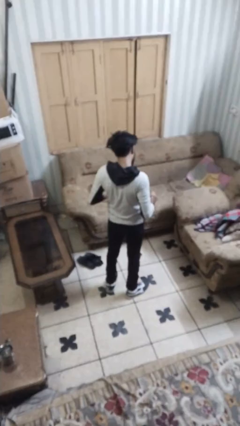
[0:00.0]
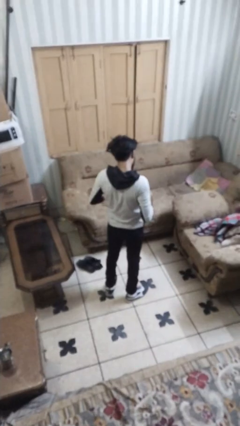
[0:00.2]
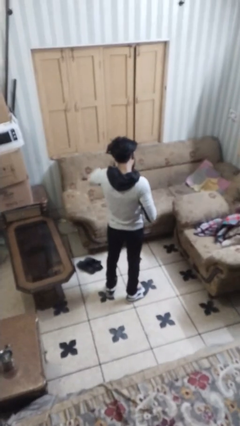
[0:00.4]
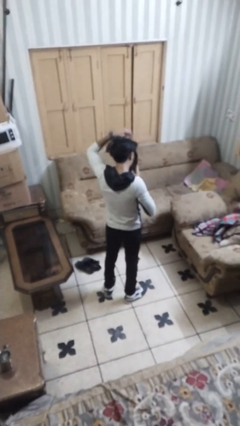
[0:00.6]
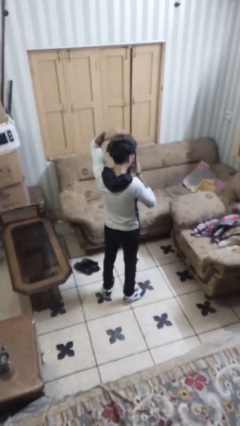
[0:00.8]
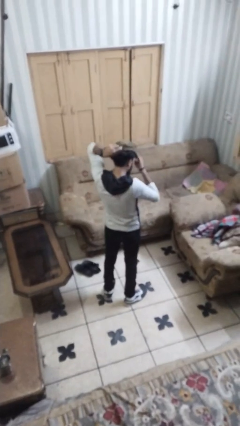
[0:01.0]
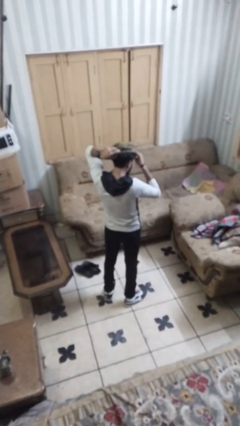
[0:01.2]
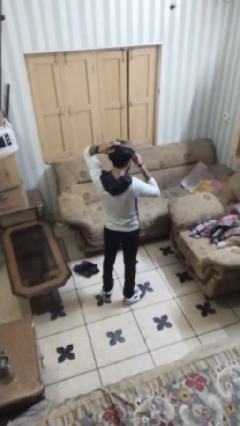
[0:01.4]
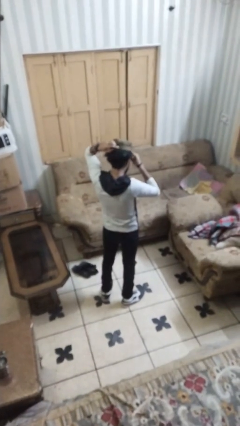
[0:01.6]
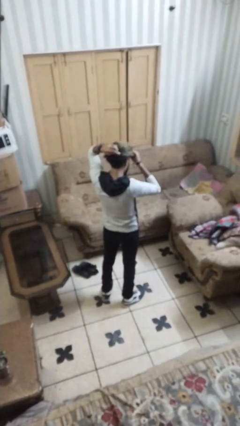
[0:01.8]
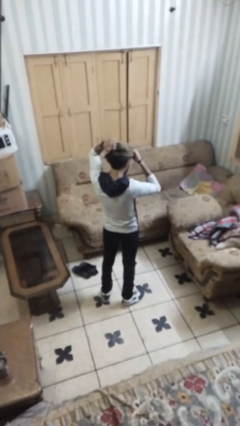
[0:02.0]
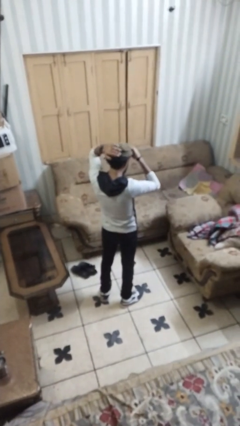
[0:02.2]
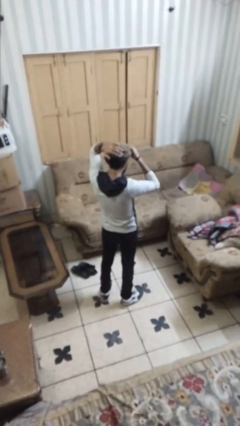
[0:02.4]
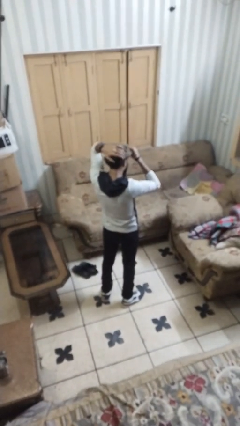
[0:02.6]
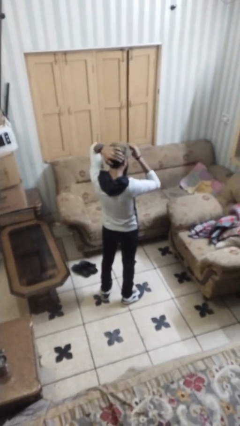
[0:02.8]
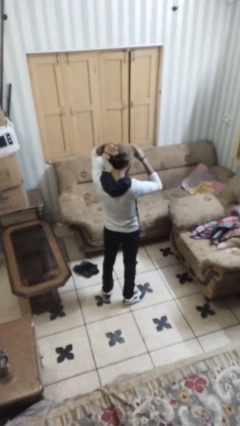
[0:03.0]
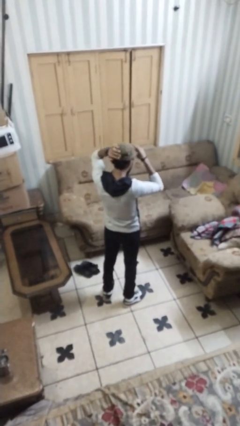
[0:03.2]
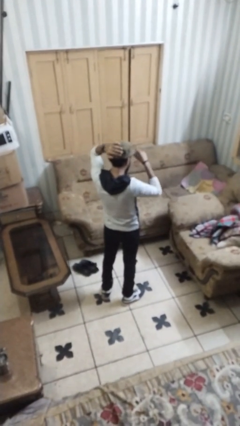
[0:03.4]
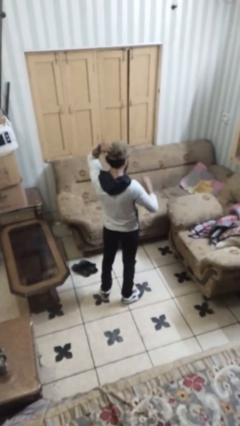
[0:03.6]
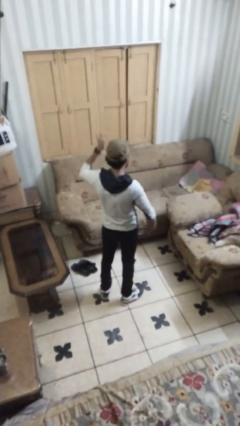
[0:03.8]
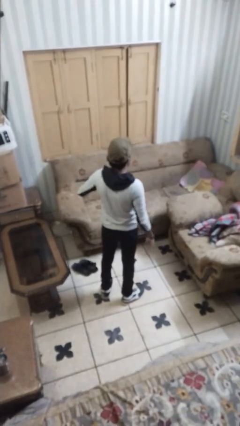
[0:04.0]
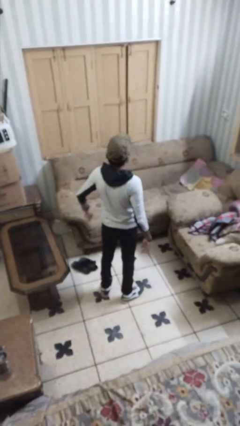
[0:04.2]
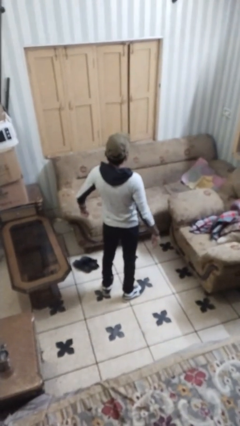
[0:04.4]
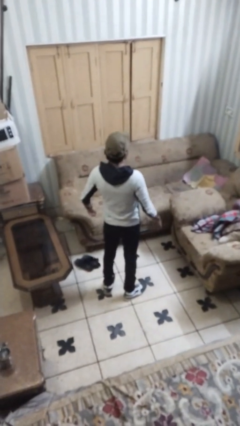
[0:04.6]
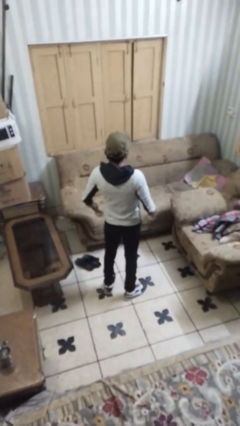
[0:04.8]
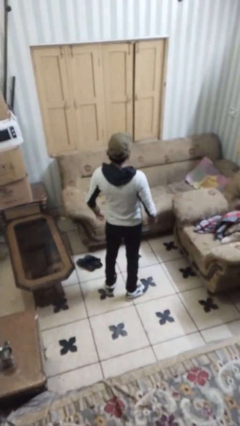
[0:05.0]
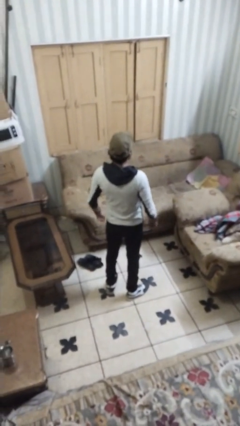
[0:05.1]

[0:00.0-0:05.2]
person puts on hat

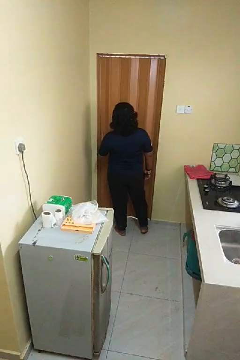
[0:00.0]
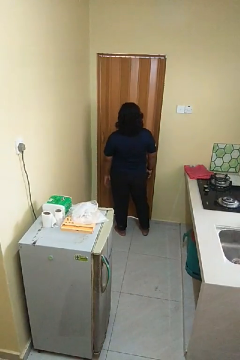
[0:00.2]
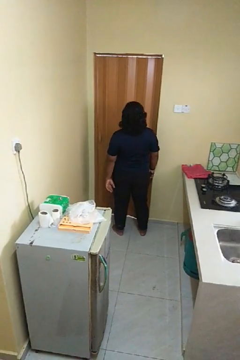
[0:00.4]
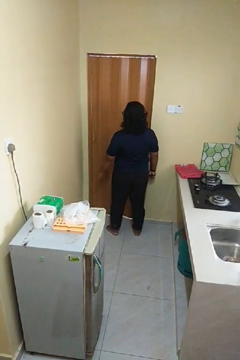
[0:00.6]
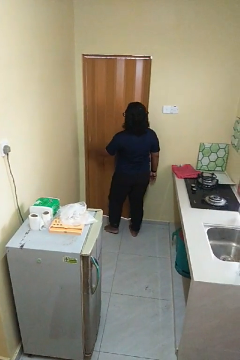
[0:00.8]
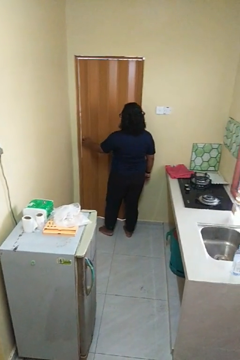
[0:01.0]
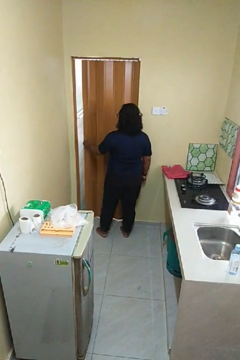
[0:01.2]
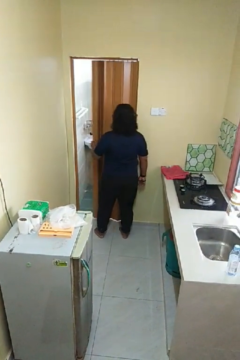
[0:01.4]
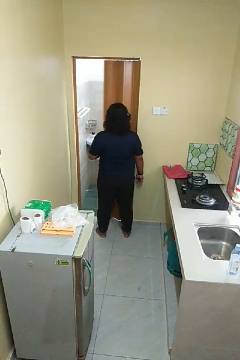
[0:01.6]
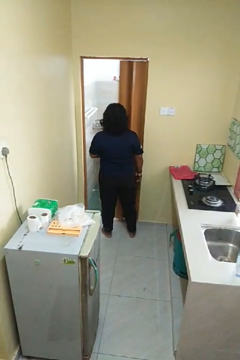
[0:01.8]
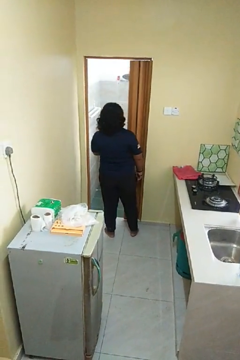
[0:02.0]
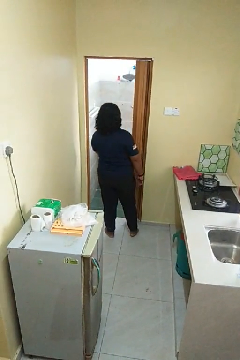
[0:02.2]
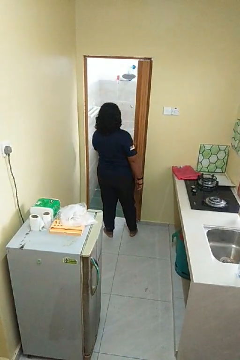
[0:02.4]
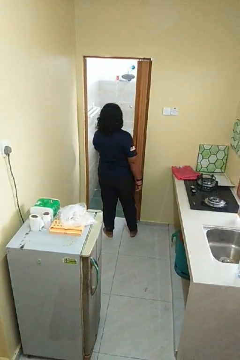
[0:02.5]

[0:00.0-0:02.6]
person opens sliding door

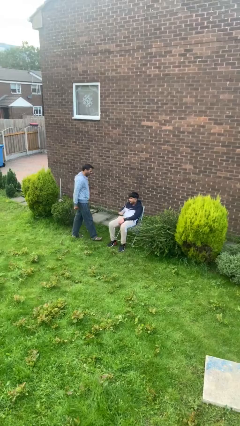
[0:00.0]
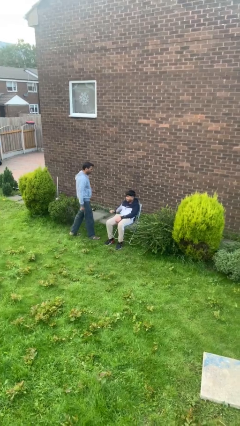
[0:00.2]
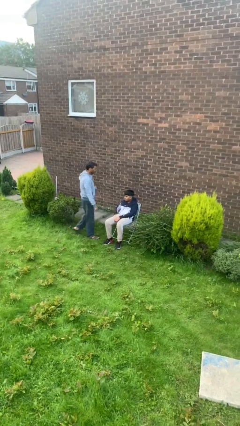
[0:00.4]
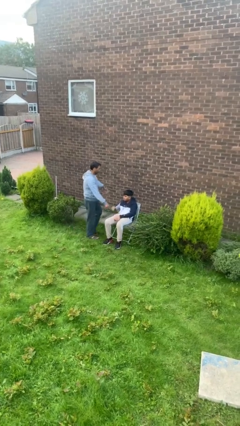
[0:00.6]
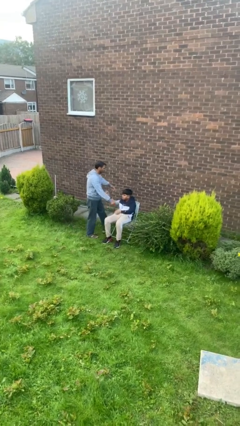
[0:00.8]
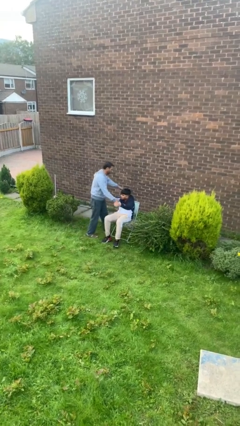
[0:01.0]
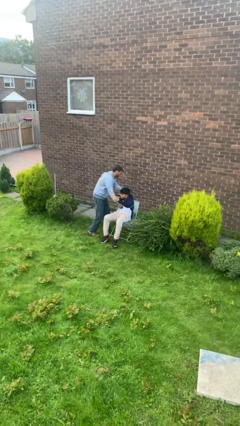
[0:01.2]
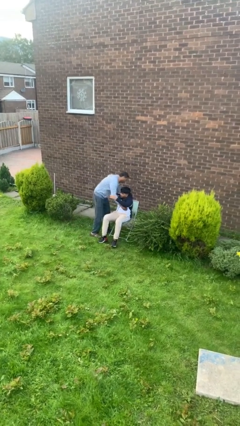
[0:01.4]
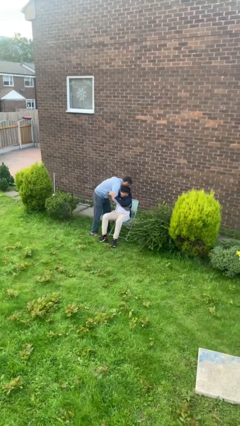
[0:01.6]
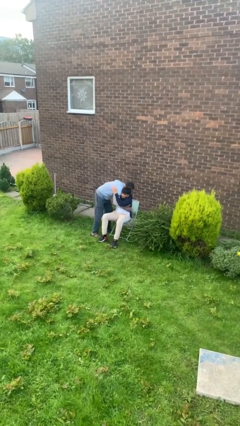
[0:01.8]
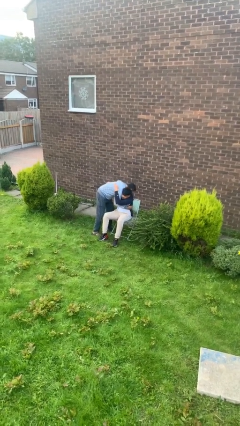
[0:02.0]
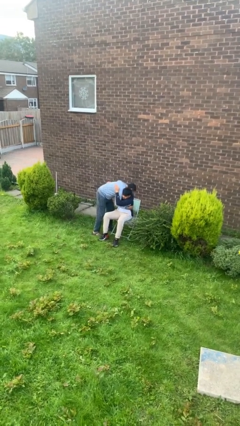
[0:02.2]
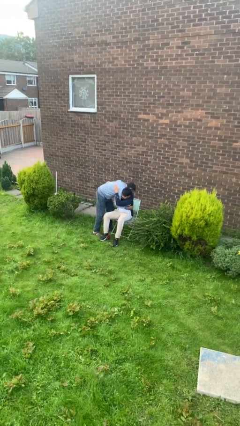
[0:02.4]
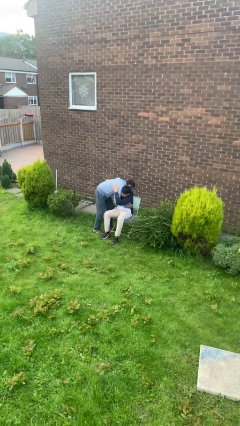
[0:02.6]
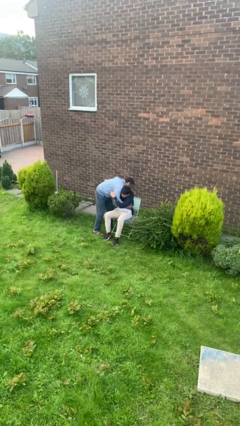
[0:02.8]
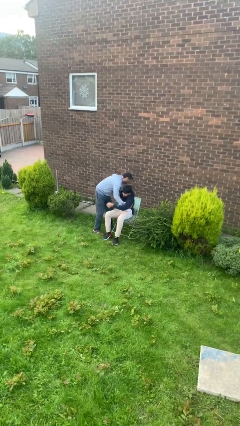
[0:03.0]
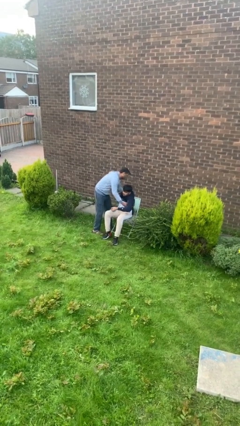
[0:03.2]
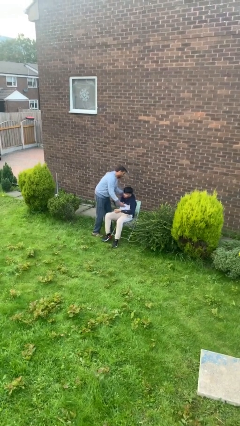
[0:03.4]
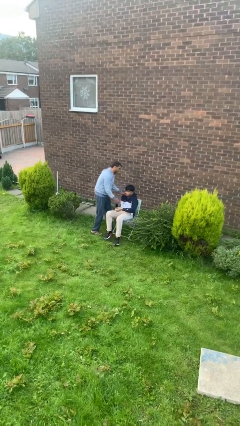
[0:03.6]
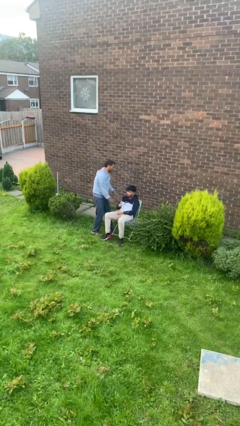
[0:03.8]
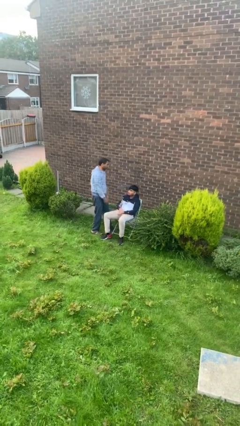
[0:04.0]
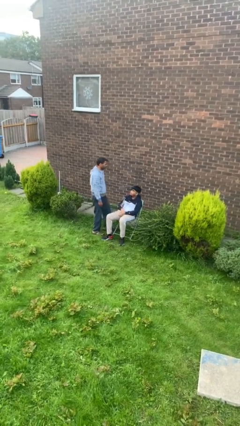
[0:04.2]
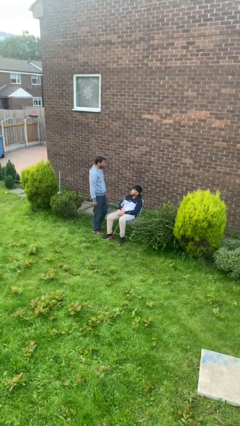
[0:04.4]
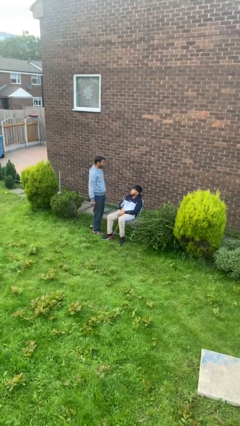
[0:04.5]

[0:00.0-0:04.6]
person embraces person

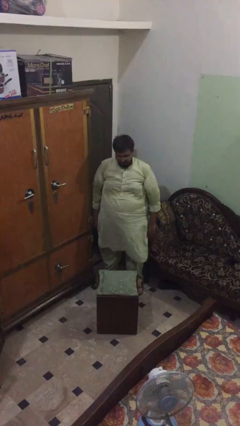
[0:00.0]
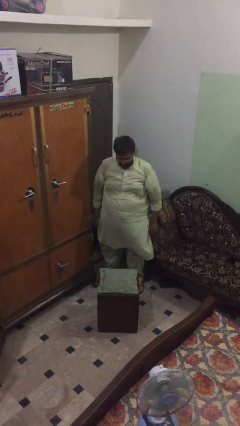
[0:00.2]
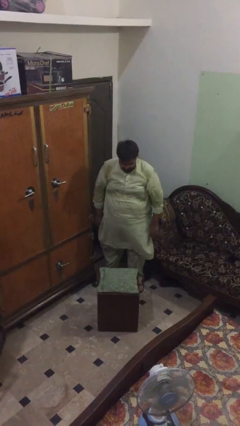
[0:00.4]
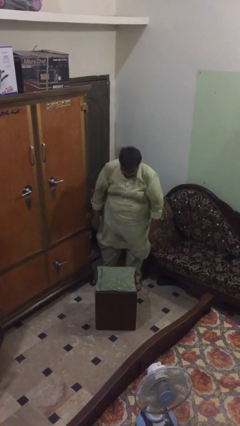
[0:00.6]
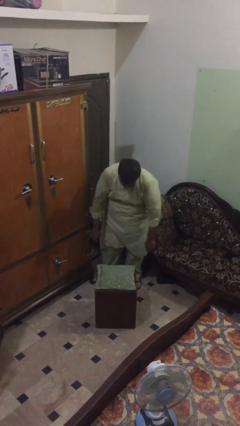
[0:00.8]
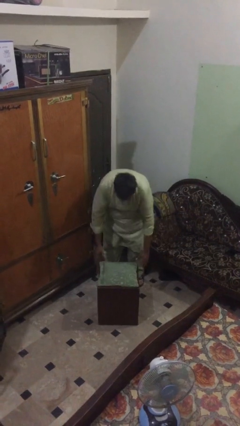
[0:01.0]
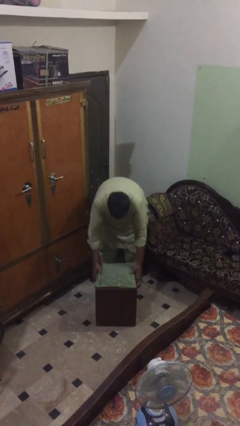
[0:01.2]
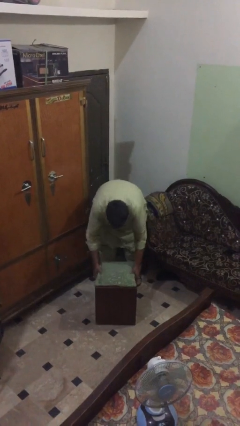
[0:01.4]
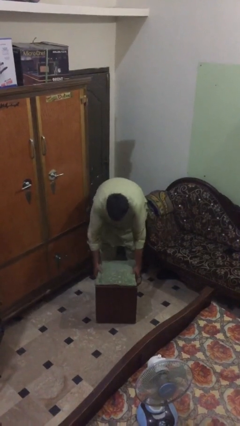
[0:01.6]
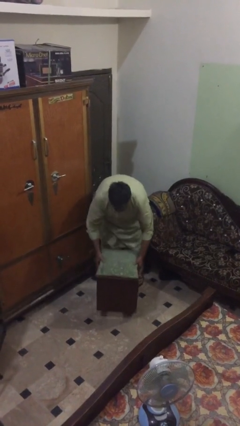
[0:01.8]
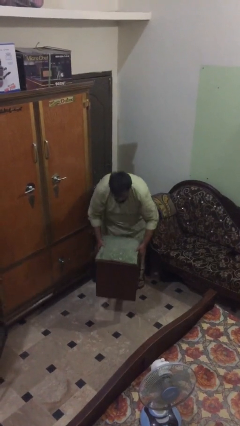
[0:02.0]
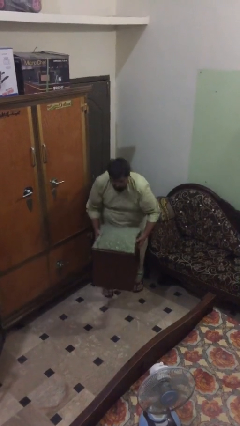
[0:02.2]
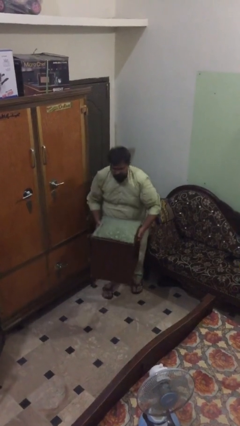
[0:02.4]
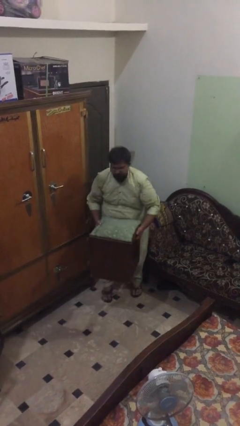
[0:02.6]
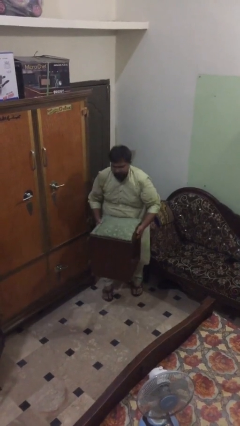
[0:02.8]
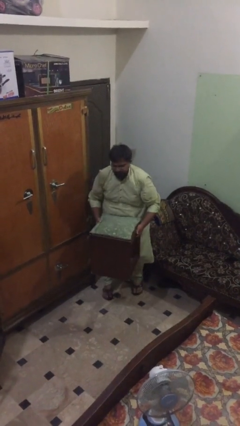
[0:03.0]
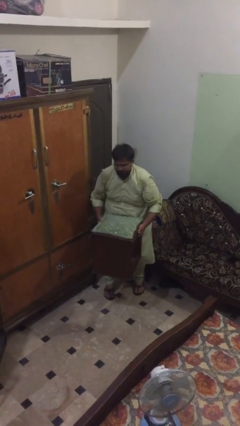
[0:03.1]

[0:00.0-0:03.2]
person picks up object from floor

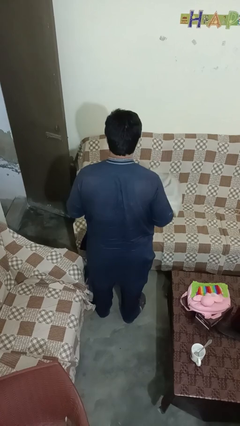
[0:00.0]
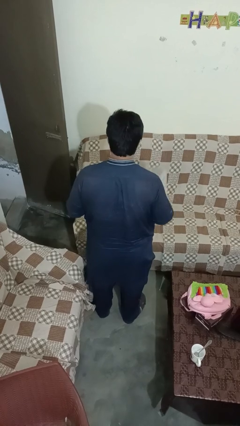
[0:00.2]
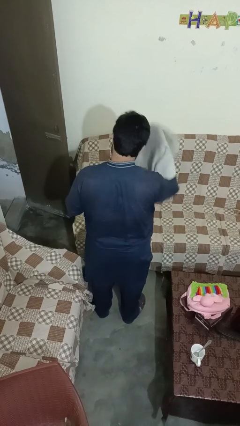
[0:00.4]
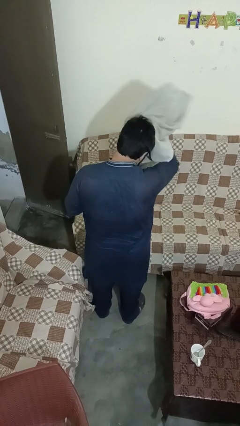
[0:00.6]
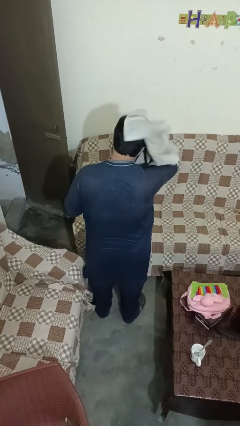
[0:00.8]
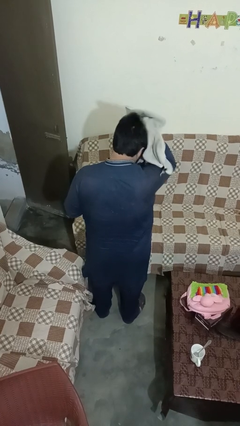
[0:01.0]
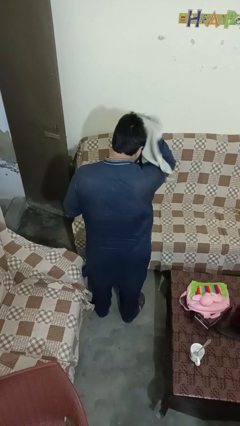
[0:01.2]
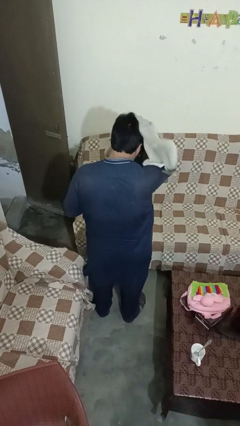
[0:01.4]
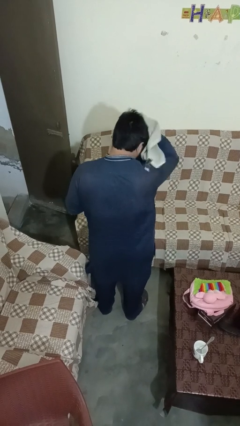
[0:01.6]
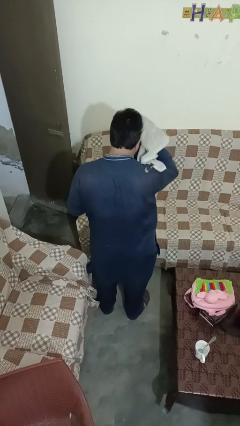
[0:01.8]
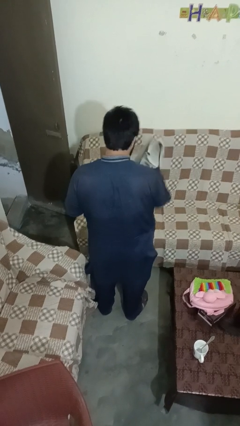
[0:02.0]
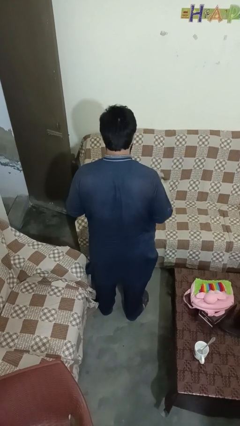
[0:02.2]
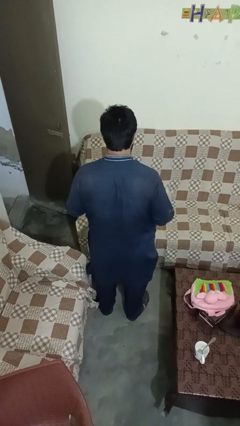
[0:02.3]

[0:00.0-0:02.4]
person dries hair with towel
